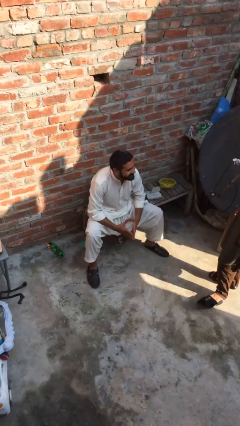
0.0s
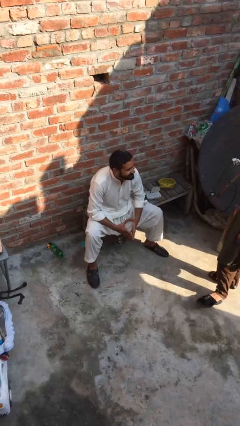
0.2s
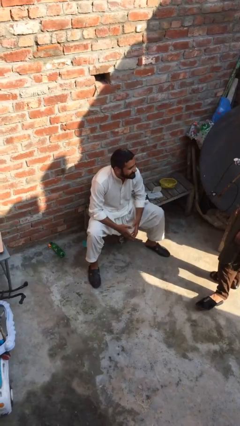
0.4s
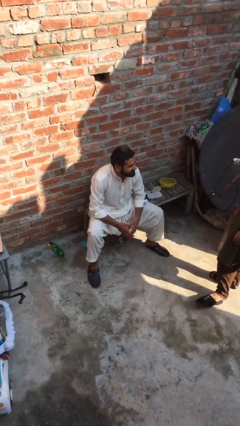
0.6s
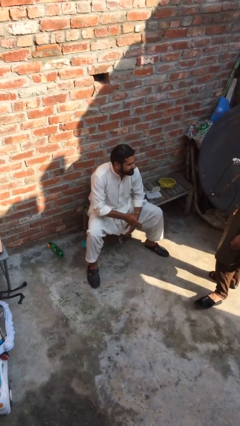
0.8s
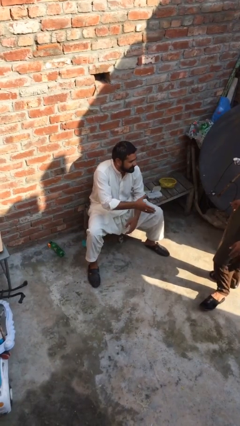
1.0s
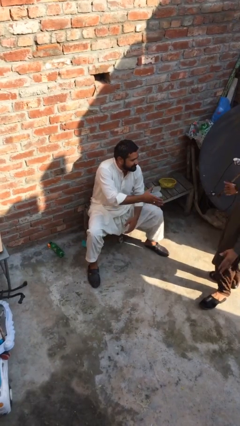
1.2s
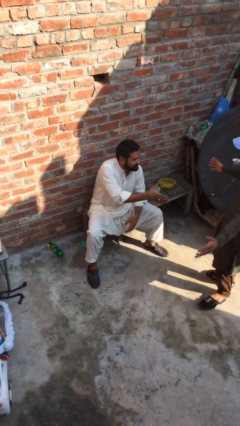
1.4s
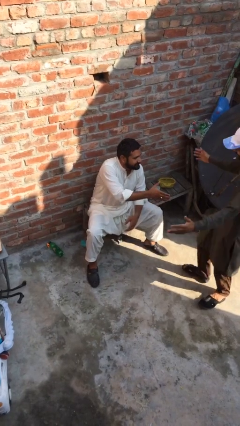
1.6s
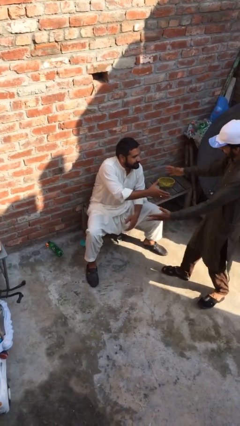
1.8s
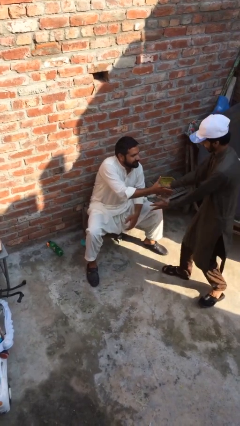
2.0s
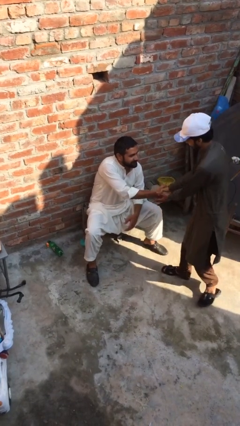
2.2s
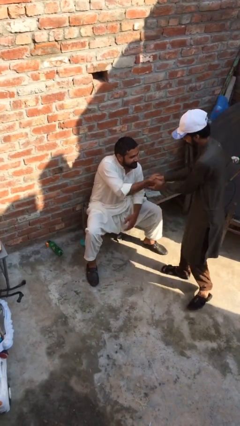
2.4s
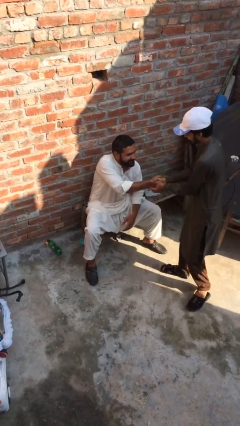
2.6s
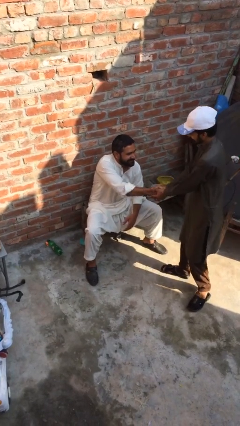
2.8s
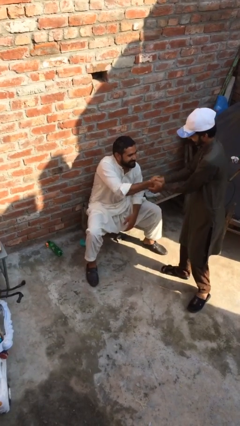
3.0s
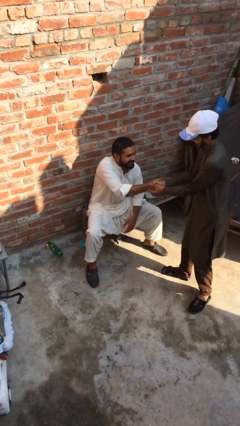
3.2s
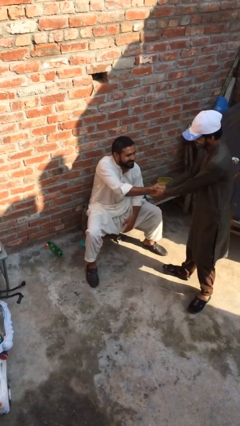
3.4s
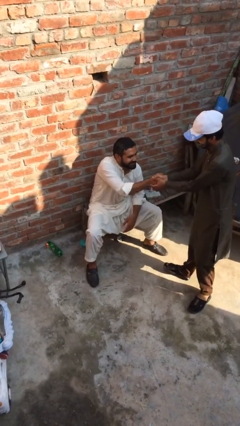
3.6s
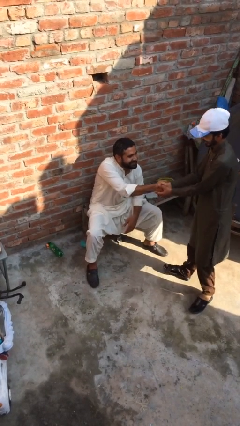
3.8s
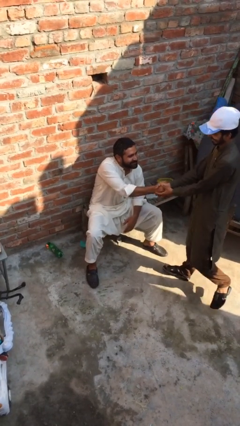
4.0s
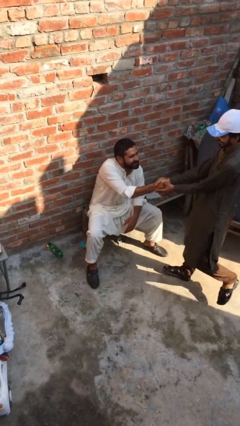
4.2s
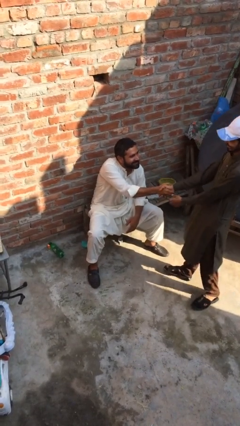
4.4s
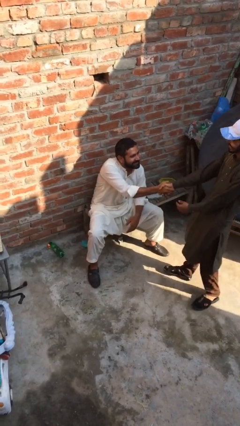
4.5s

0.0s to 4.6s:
person shakes hand

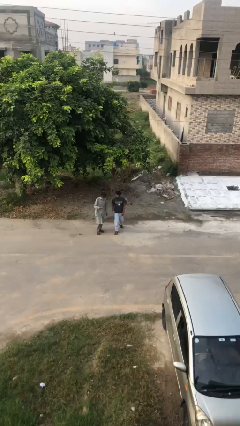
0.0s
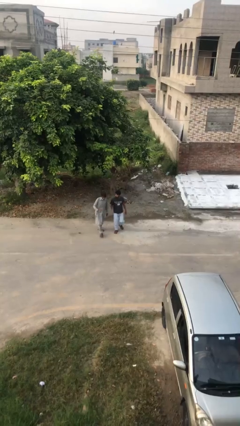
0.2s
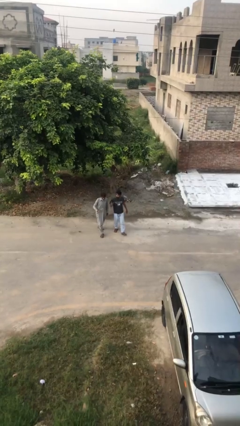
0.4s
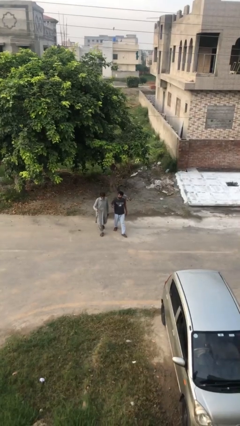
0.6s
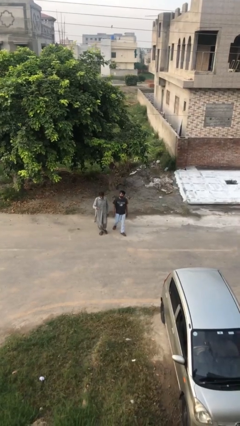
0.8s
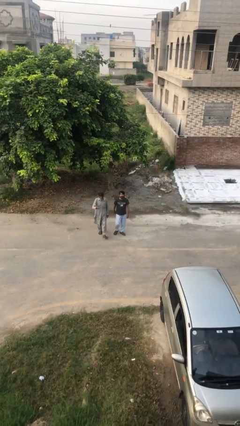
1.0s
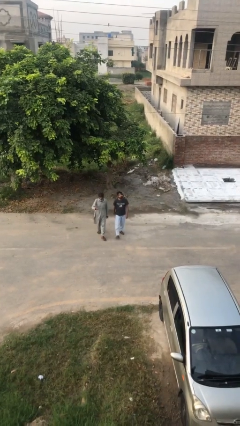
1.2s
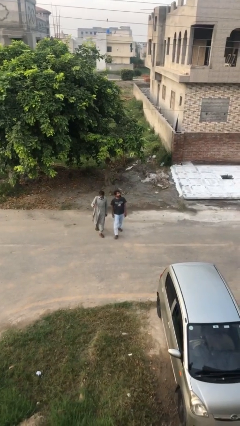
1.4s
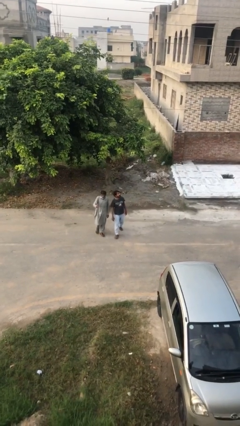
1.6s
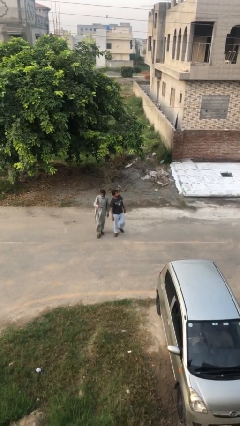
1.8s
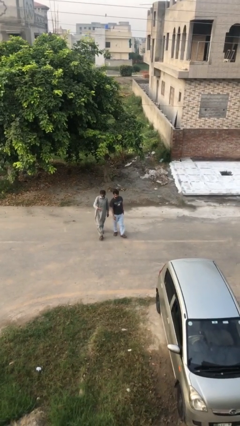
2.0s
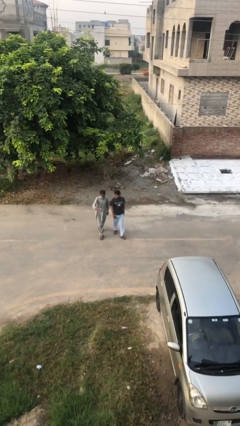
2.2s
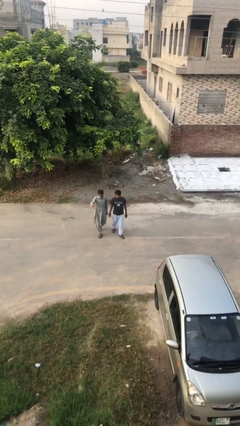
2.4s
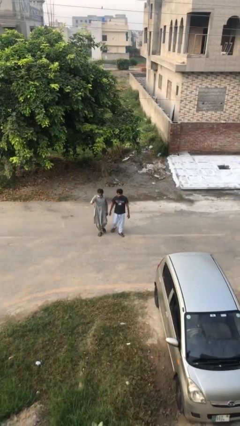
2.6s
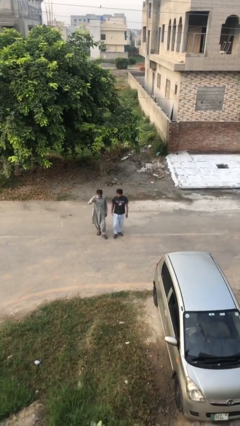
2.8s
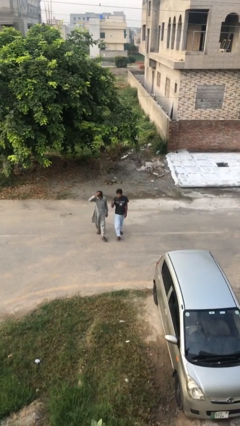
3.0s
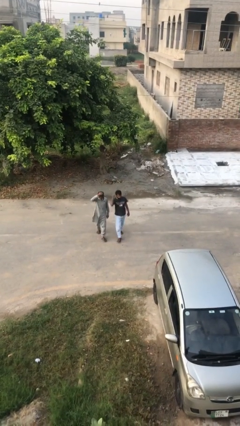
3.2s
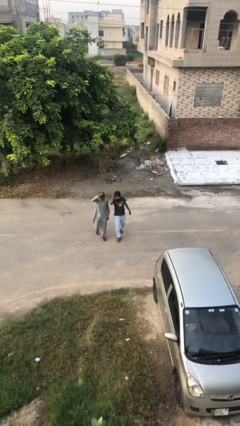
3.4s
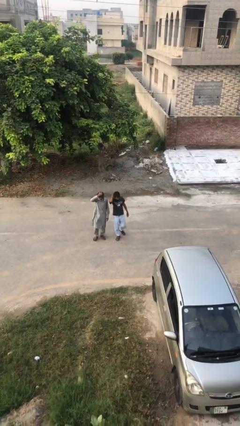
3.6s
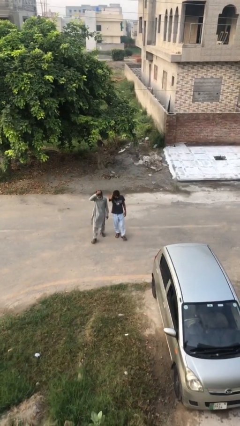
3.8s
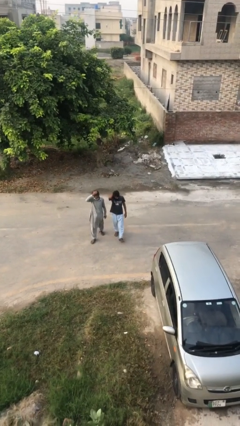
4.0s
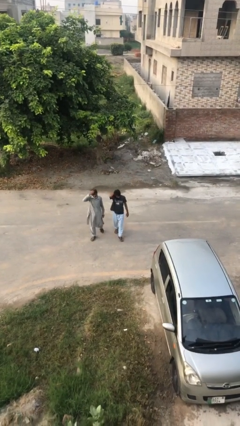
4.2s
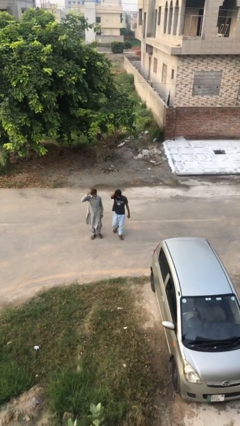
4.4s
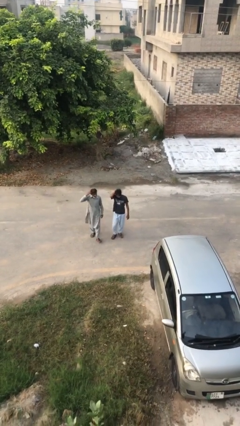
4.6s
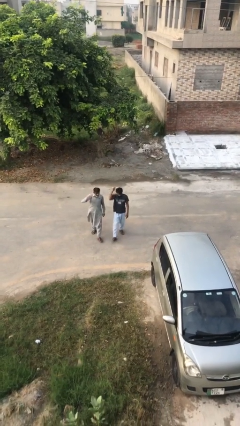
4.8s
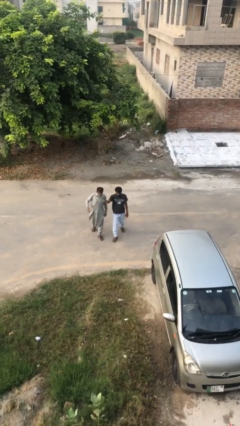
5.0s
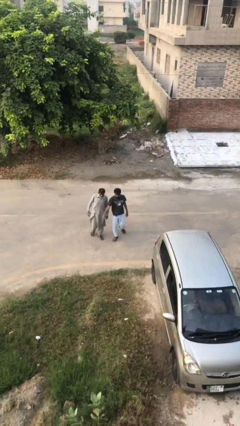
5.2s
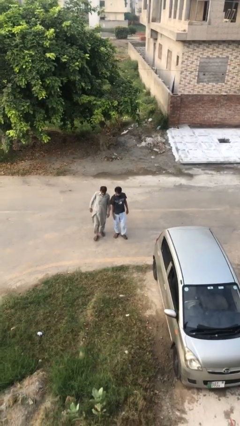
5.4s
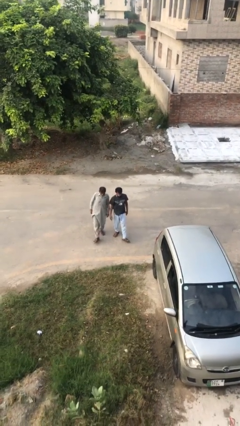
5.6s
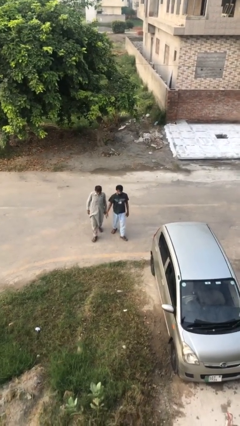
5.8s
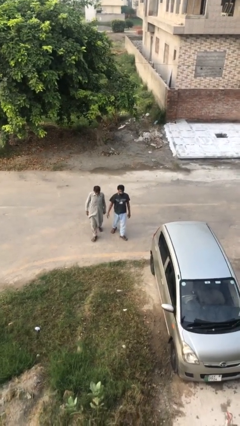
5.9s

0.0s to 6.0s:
person talks to person

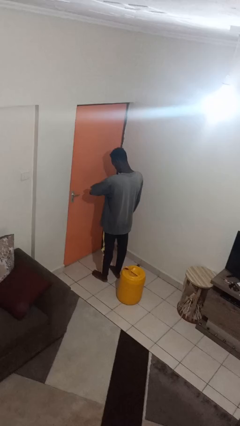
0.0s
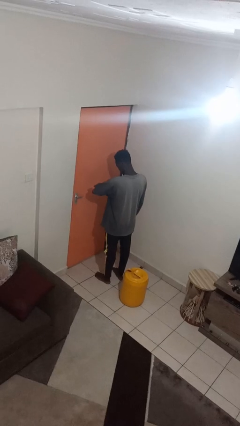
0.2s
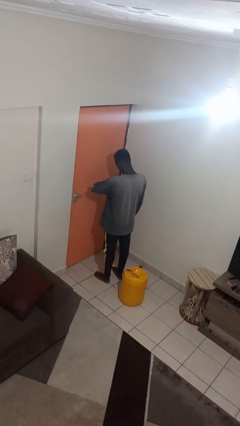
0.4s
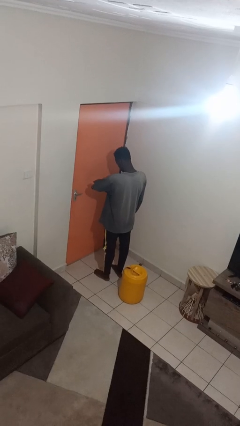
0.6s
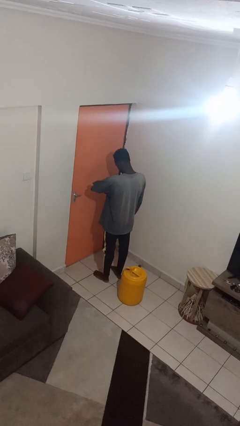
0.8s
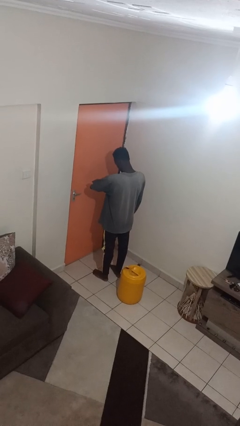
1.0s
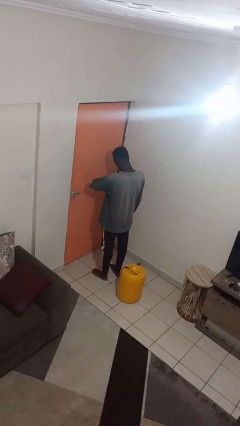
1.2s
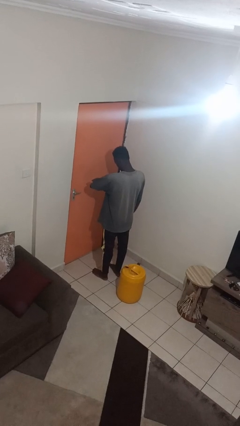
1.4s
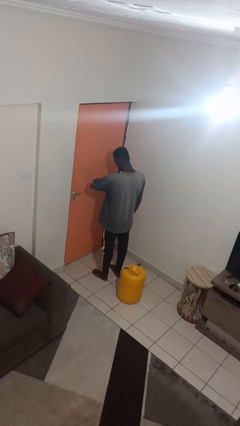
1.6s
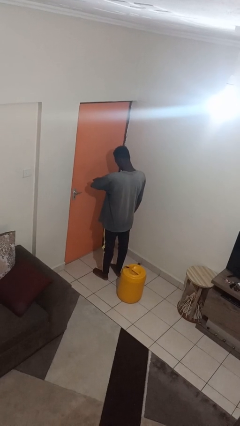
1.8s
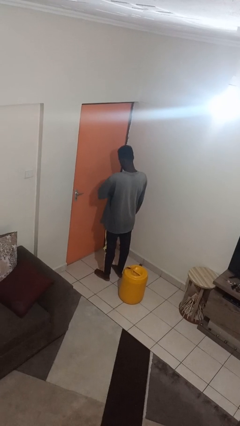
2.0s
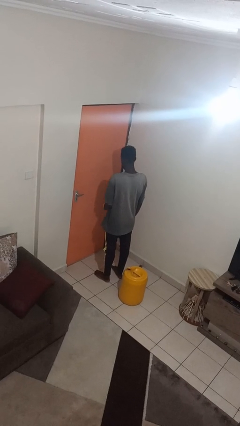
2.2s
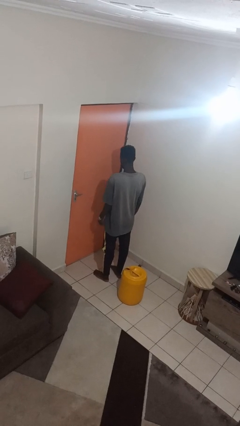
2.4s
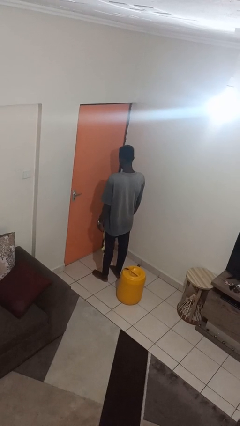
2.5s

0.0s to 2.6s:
person looks at wristwatch

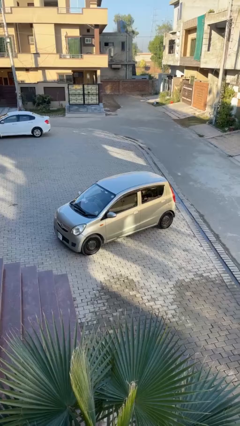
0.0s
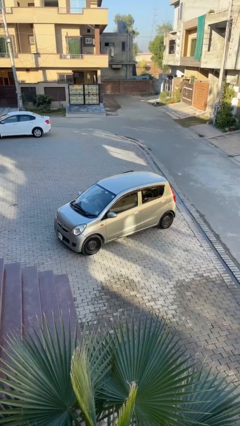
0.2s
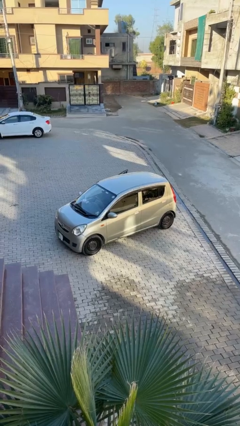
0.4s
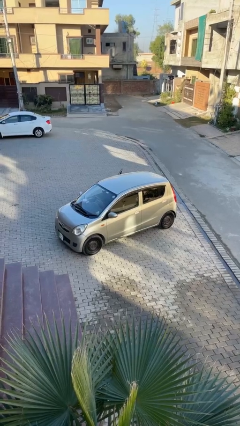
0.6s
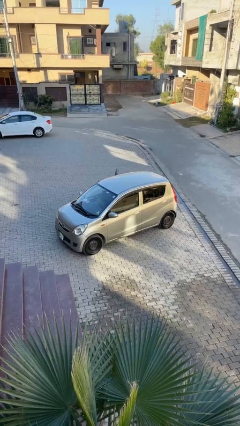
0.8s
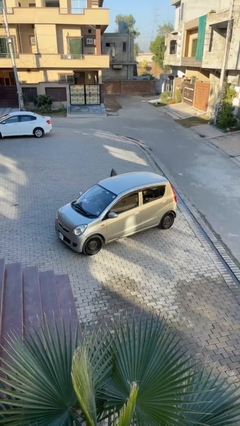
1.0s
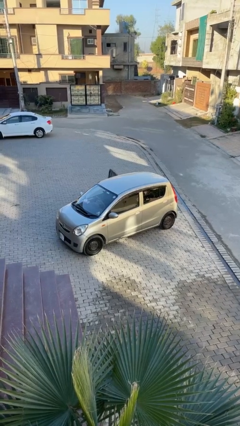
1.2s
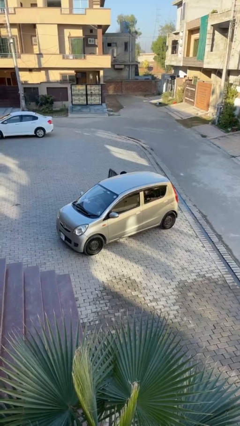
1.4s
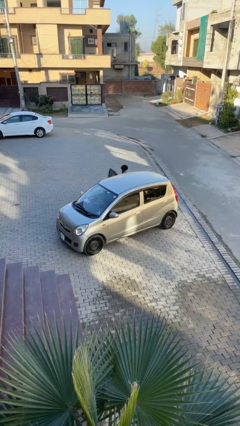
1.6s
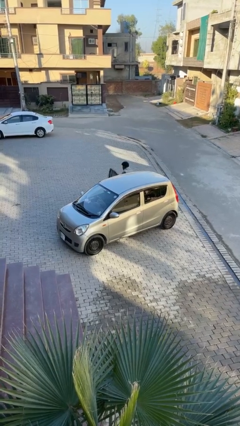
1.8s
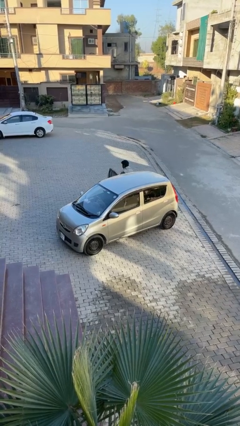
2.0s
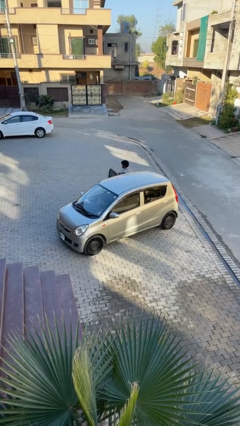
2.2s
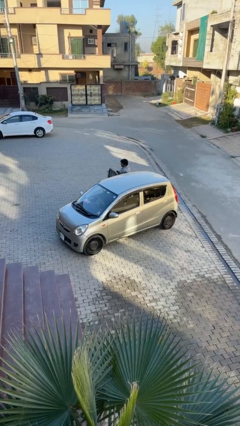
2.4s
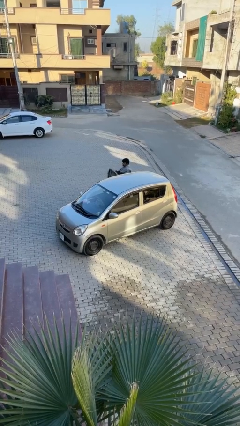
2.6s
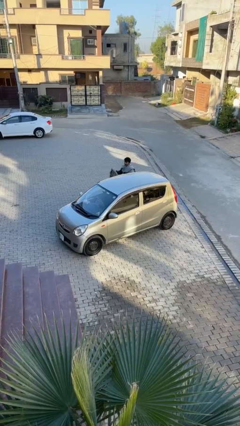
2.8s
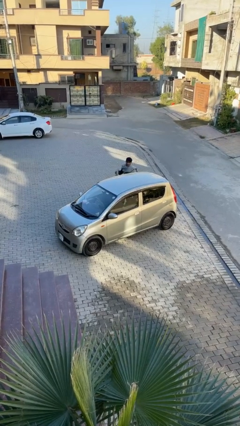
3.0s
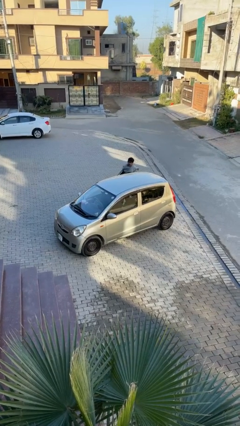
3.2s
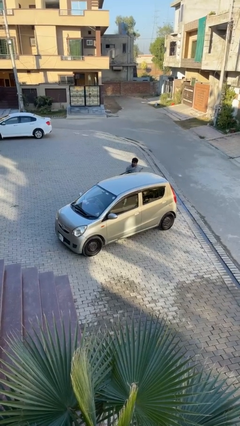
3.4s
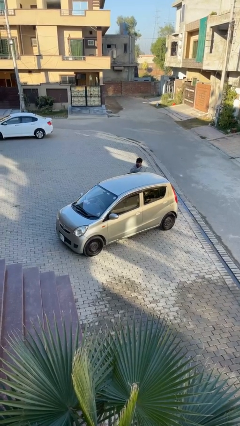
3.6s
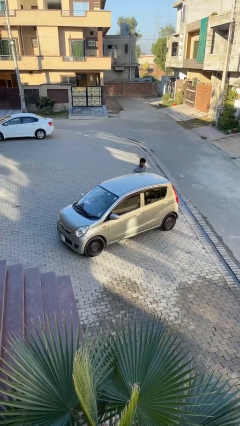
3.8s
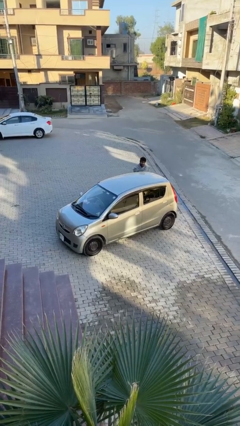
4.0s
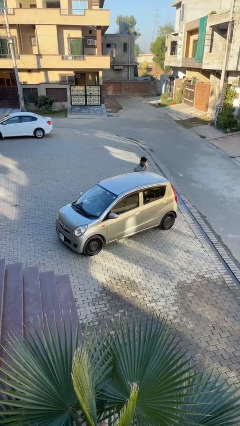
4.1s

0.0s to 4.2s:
car drops off person

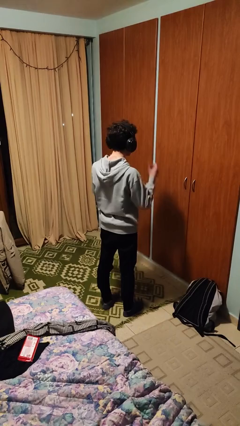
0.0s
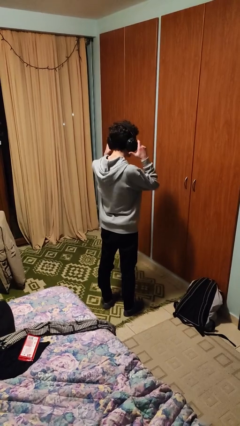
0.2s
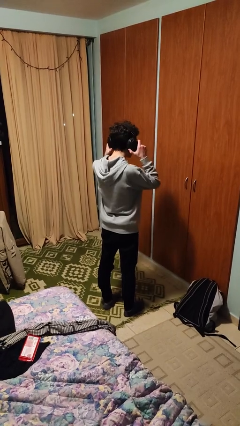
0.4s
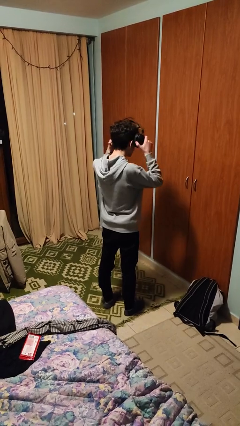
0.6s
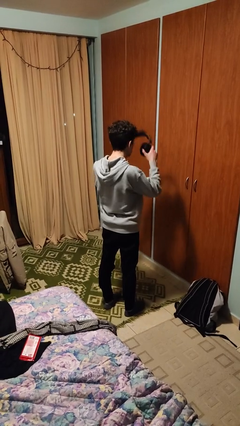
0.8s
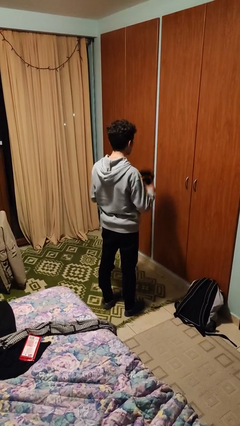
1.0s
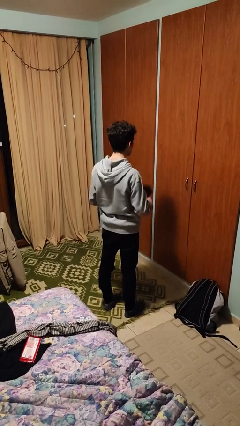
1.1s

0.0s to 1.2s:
person takes off headphones
